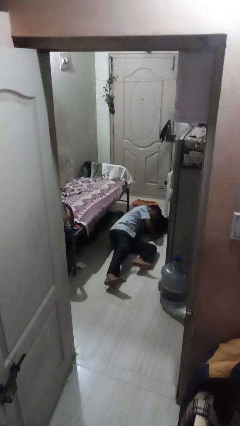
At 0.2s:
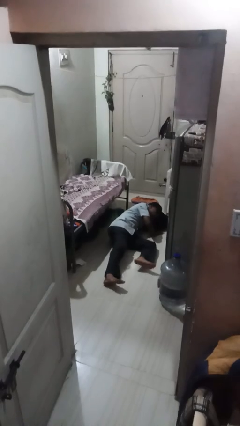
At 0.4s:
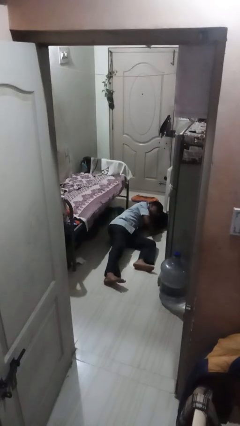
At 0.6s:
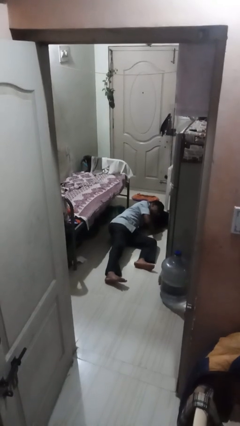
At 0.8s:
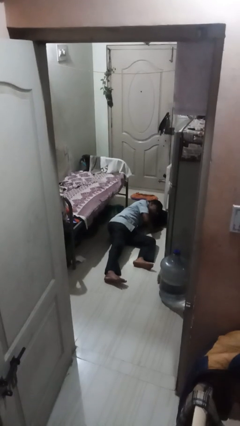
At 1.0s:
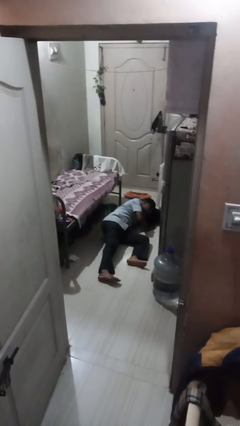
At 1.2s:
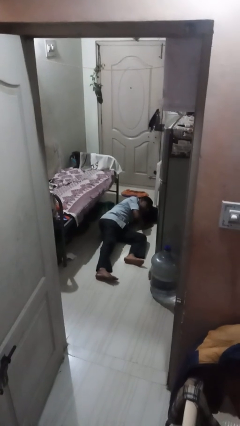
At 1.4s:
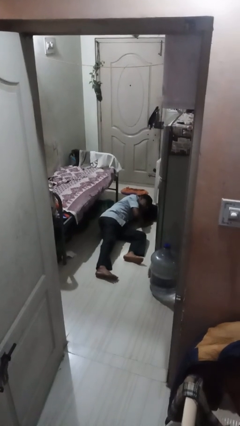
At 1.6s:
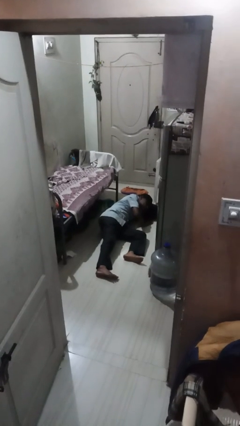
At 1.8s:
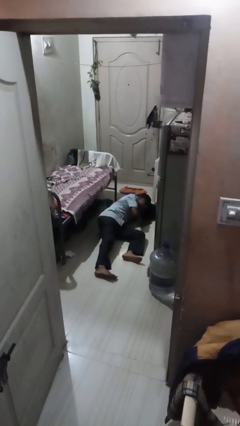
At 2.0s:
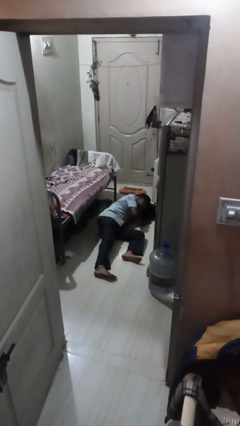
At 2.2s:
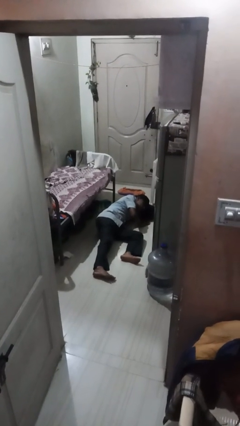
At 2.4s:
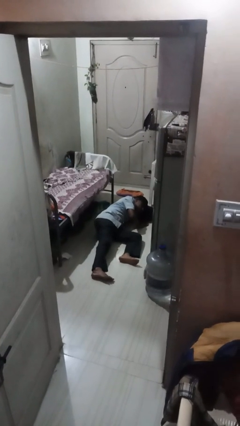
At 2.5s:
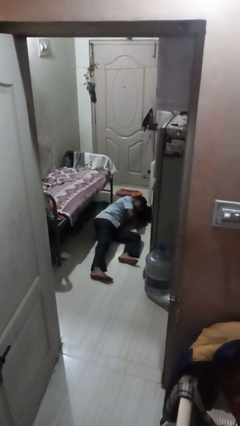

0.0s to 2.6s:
person lies down on floor

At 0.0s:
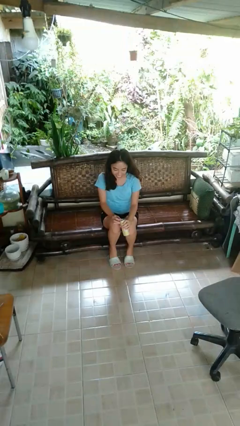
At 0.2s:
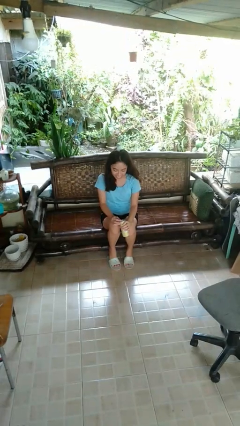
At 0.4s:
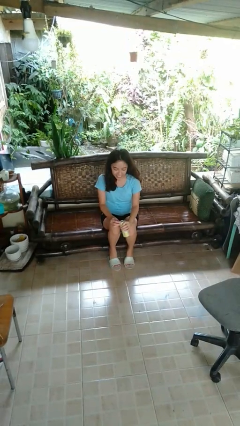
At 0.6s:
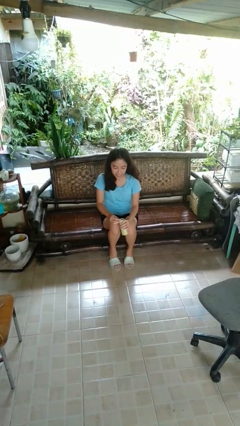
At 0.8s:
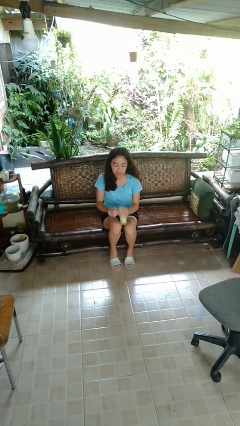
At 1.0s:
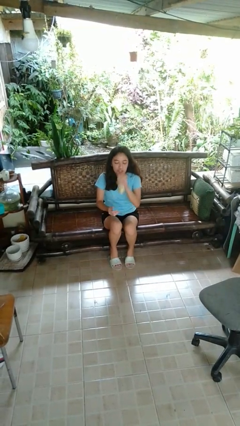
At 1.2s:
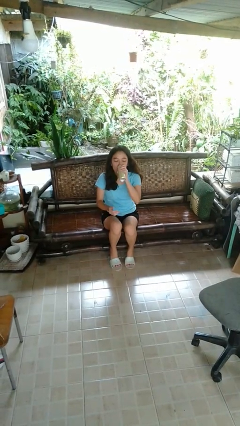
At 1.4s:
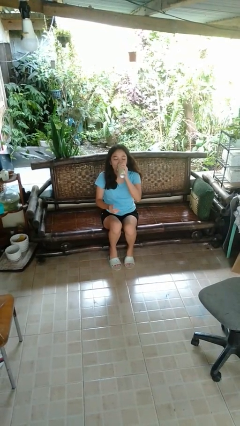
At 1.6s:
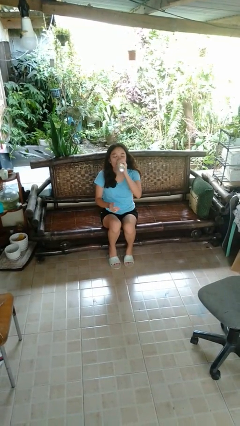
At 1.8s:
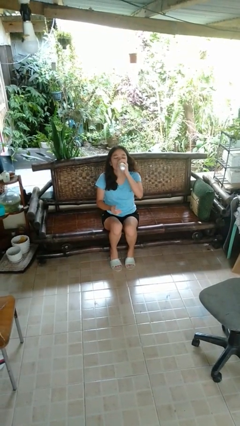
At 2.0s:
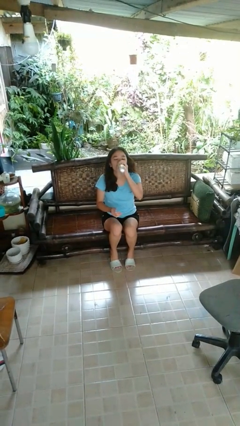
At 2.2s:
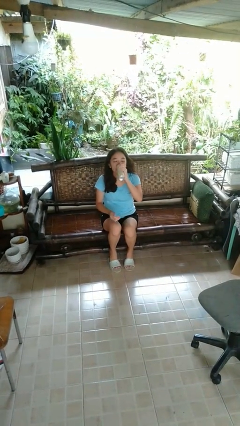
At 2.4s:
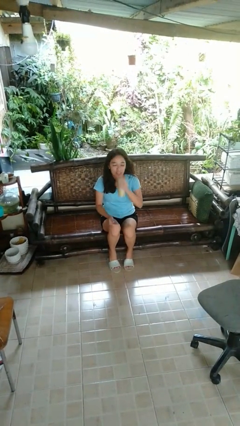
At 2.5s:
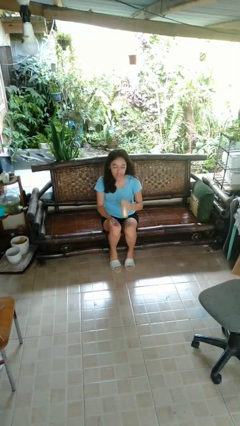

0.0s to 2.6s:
person drinks from beverage can

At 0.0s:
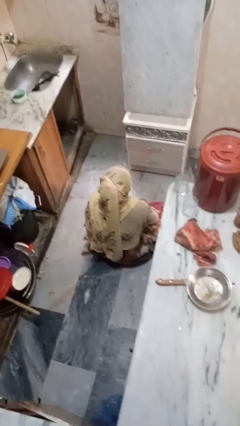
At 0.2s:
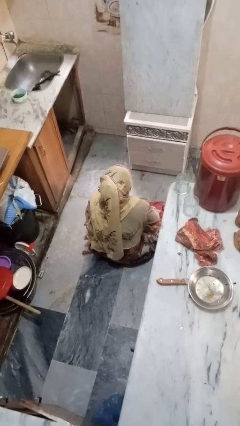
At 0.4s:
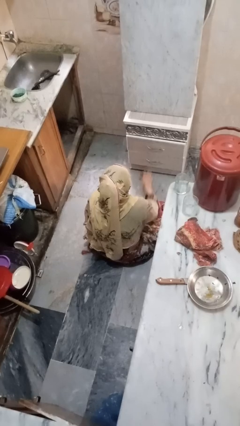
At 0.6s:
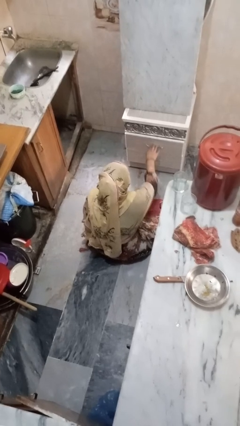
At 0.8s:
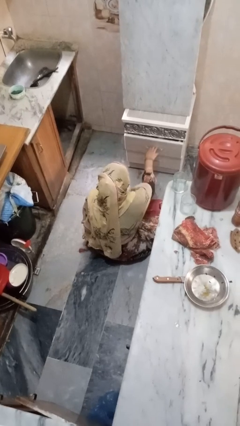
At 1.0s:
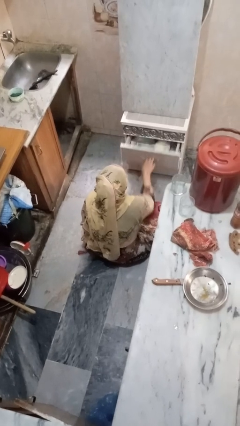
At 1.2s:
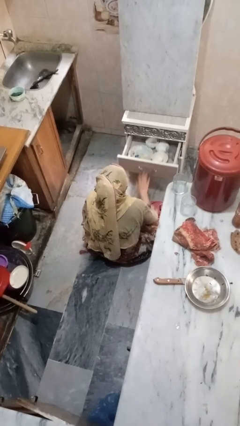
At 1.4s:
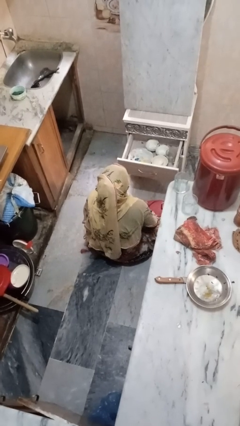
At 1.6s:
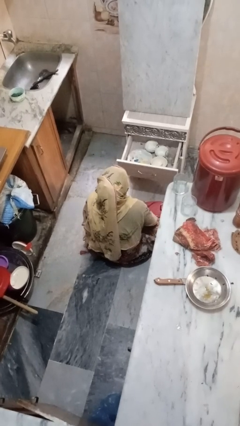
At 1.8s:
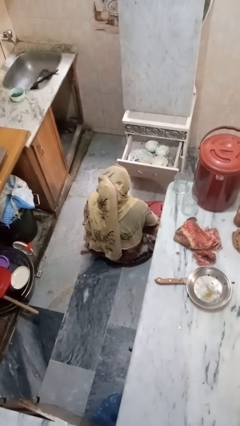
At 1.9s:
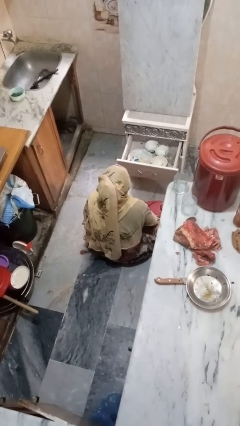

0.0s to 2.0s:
person opens kitchen drawer

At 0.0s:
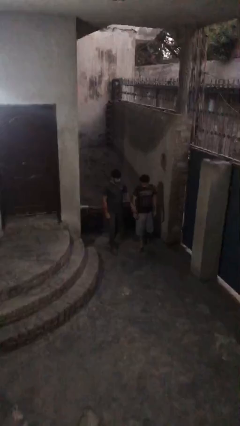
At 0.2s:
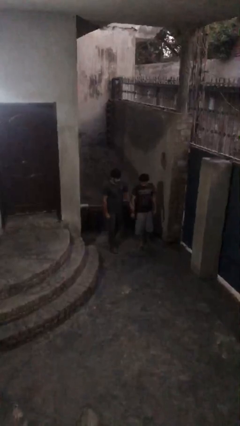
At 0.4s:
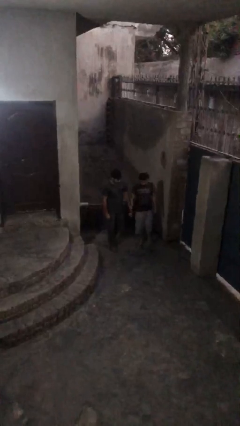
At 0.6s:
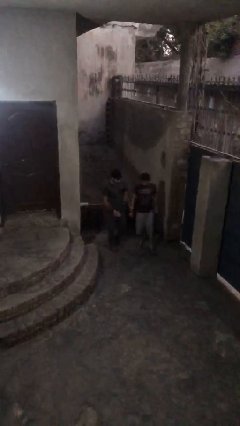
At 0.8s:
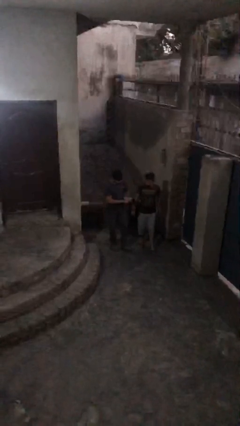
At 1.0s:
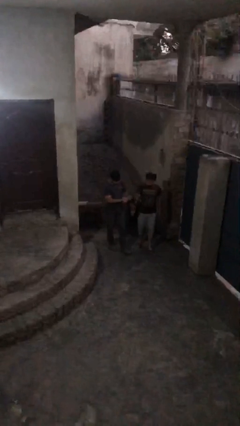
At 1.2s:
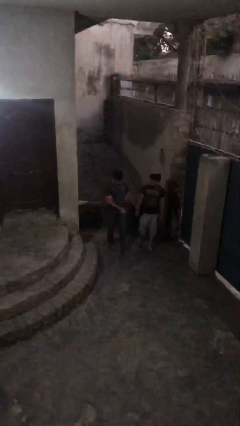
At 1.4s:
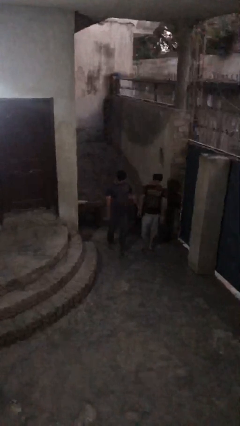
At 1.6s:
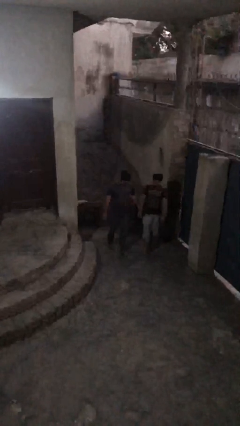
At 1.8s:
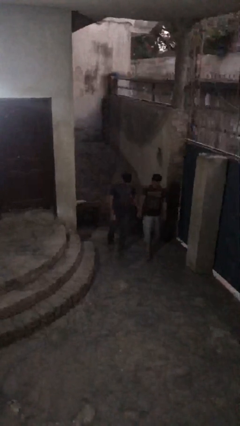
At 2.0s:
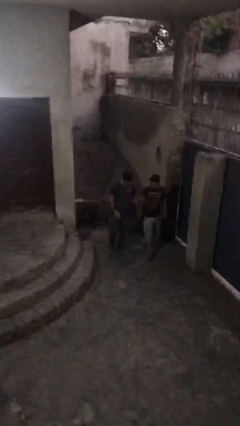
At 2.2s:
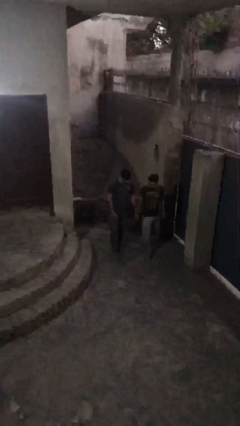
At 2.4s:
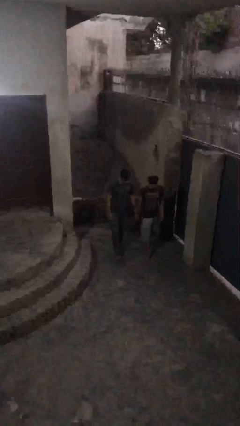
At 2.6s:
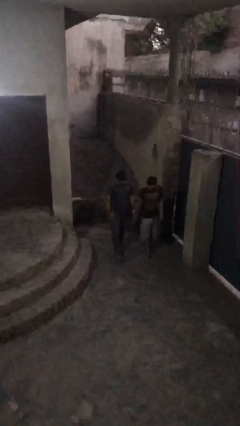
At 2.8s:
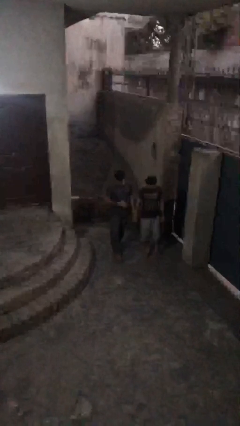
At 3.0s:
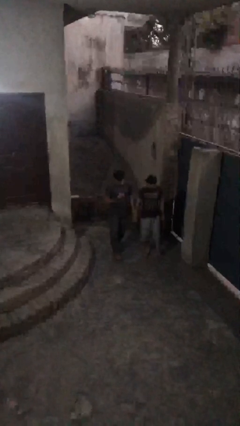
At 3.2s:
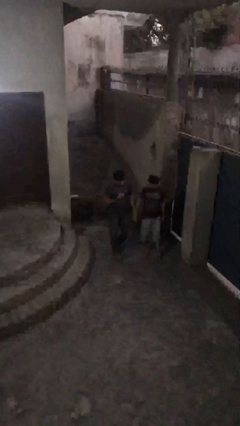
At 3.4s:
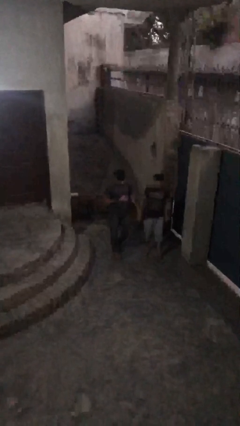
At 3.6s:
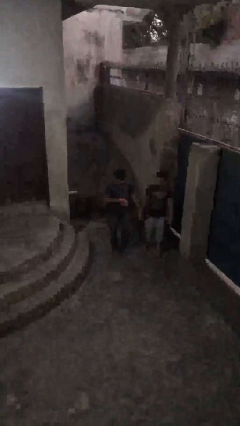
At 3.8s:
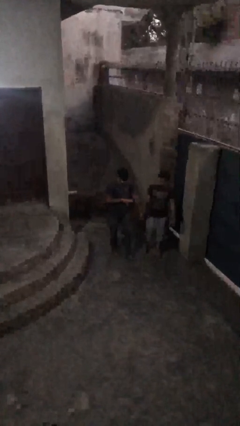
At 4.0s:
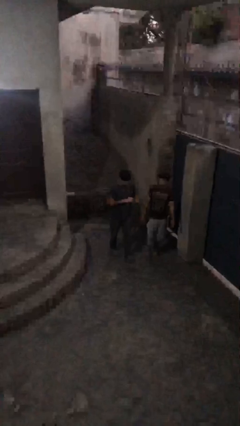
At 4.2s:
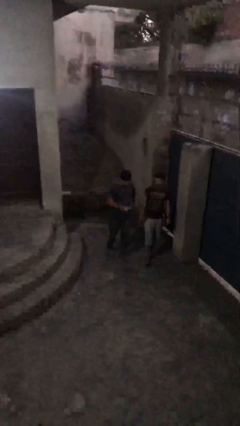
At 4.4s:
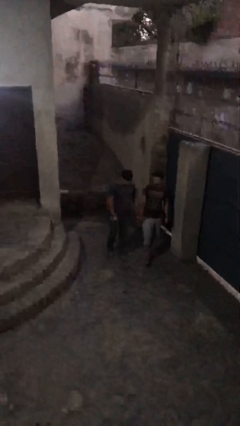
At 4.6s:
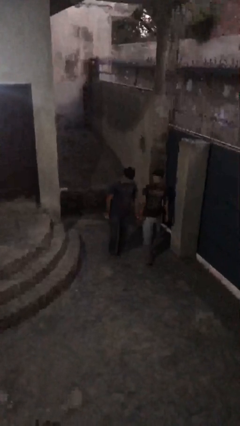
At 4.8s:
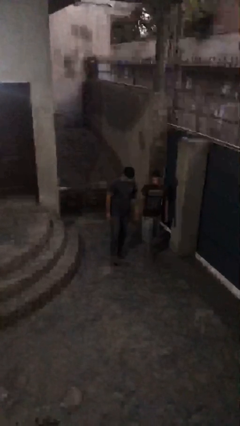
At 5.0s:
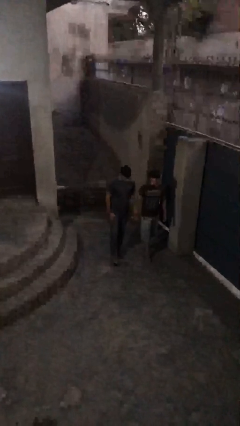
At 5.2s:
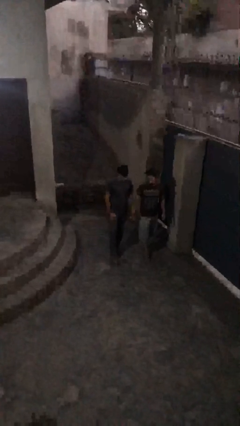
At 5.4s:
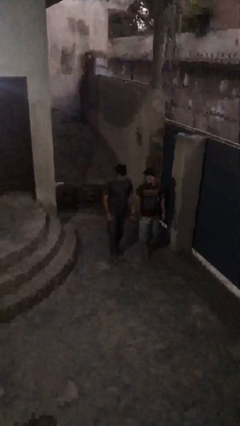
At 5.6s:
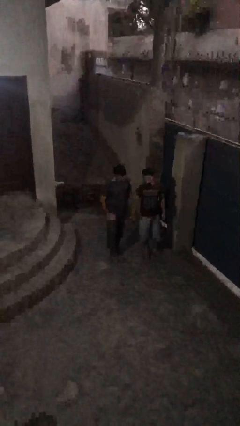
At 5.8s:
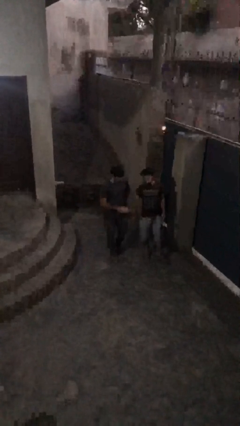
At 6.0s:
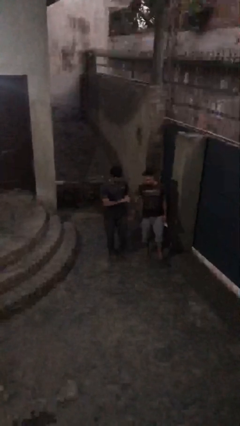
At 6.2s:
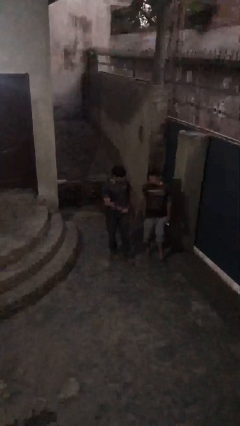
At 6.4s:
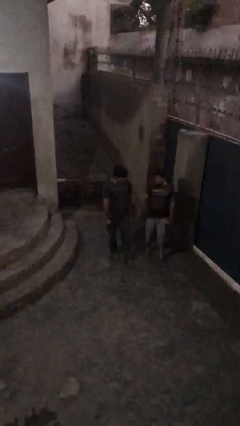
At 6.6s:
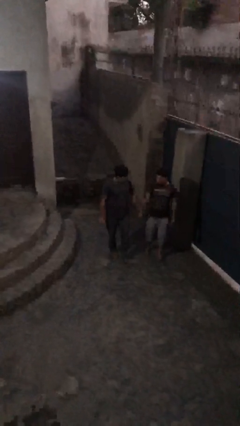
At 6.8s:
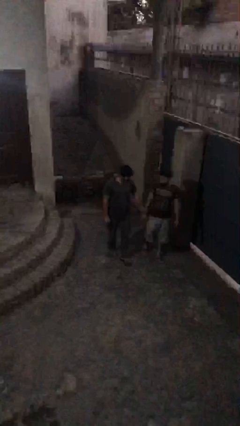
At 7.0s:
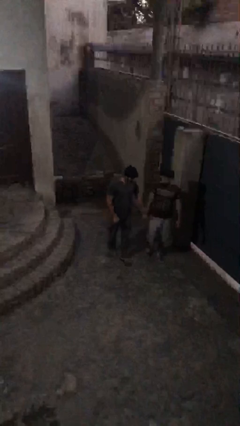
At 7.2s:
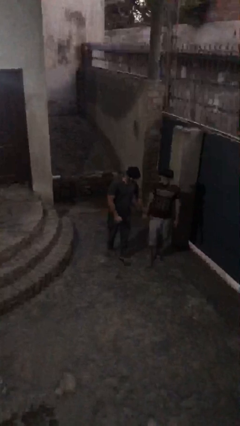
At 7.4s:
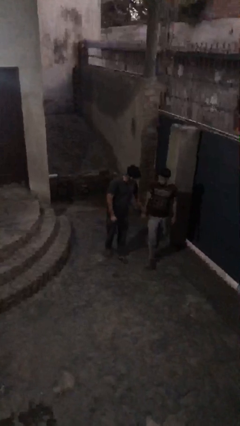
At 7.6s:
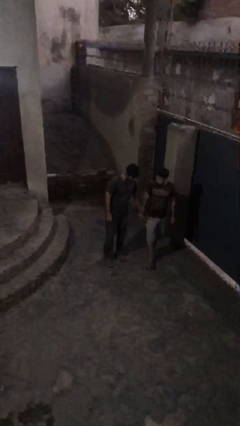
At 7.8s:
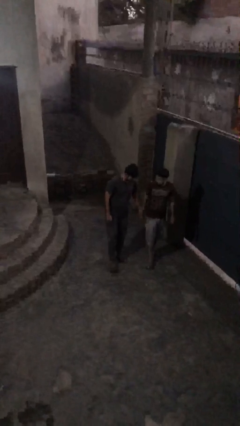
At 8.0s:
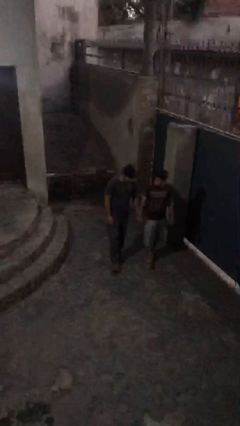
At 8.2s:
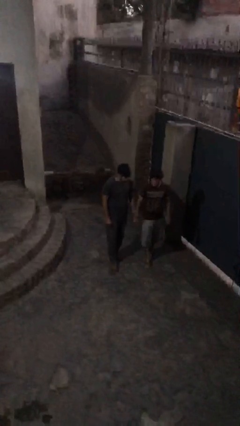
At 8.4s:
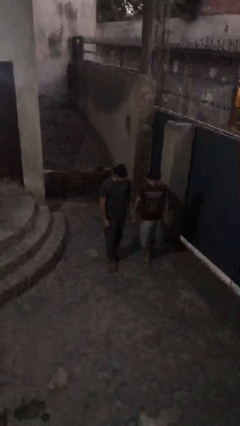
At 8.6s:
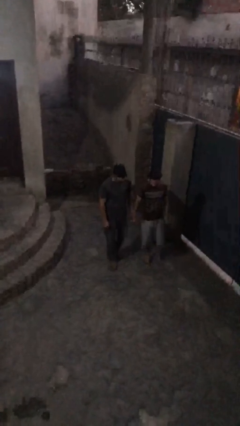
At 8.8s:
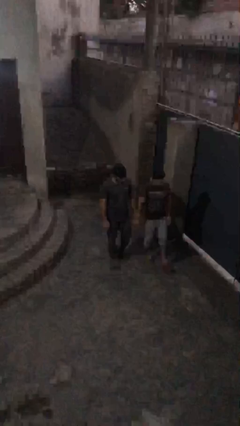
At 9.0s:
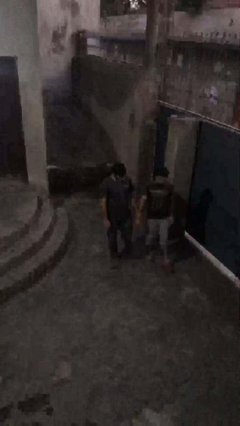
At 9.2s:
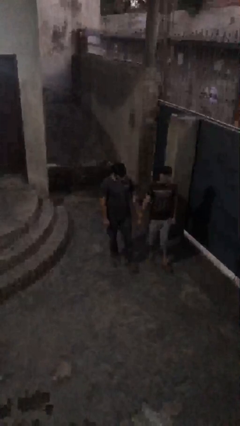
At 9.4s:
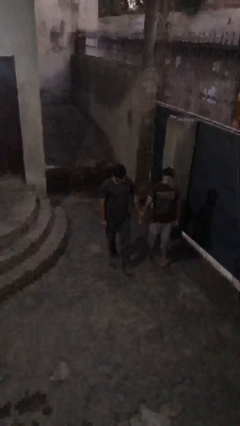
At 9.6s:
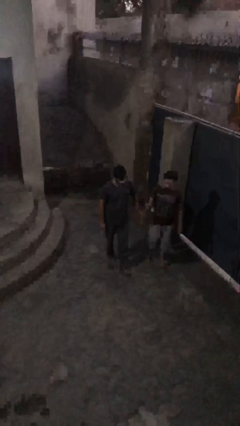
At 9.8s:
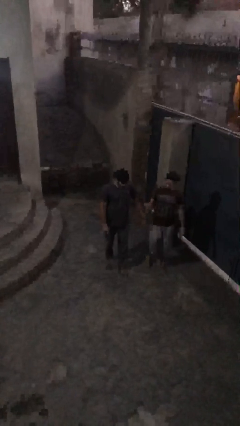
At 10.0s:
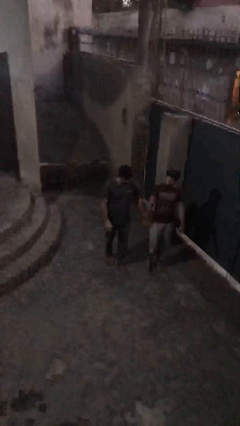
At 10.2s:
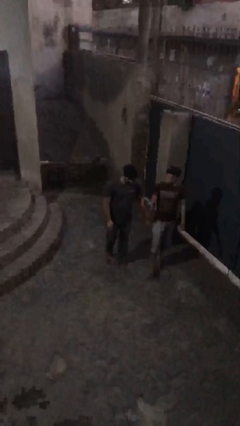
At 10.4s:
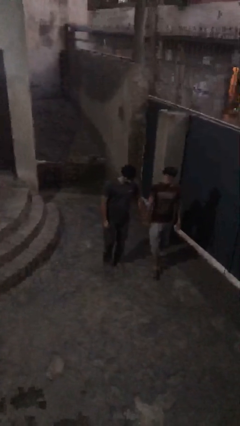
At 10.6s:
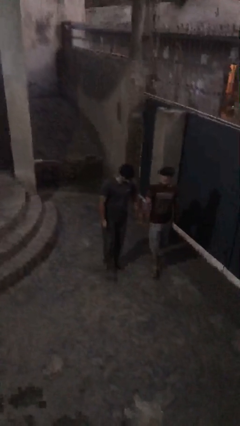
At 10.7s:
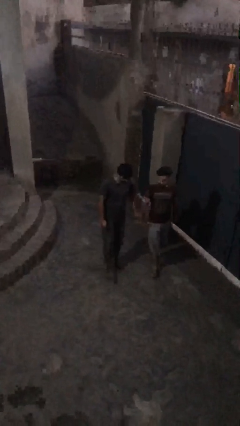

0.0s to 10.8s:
person holds hand

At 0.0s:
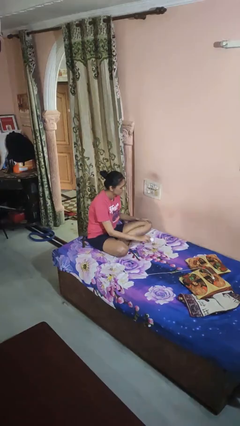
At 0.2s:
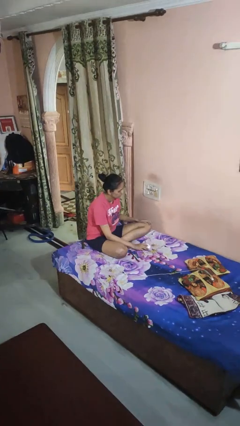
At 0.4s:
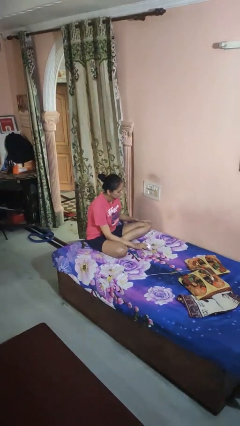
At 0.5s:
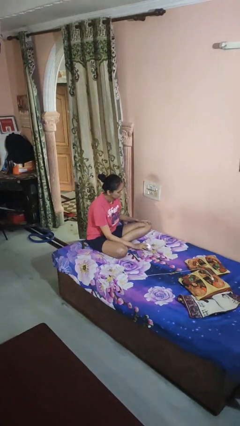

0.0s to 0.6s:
person unplugs from electrical socket
